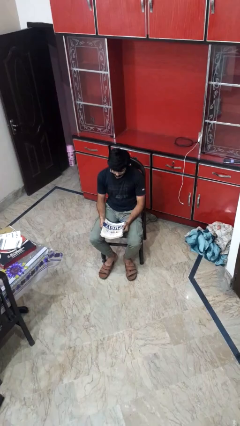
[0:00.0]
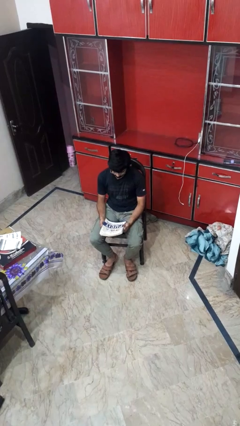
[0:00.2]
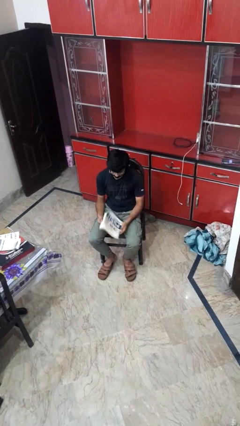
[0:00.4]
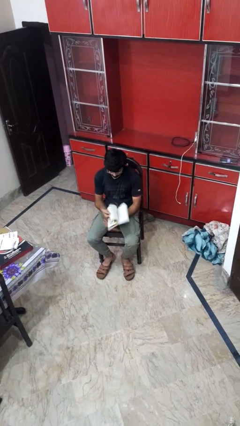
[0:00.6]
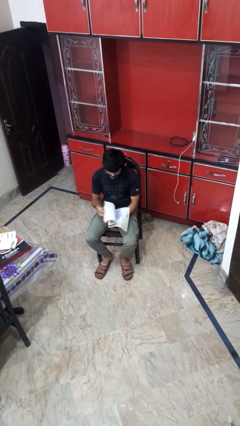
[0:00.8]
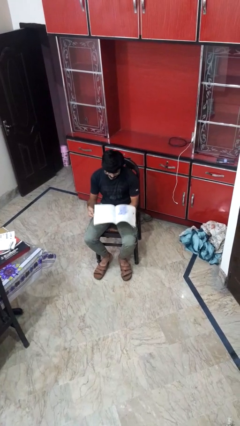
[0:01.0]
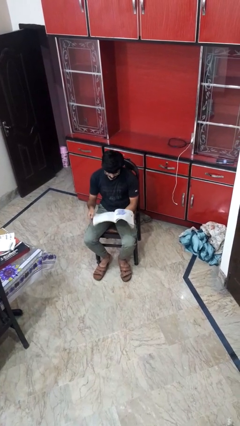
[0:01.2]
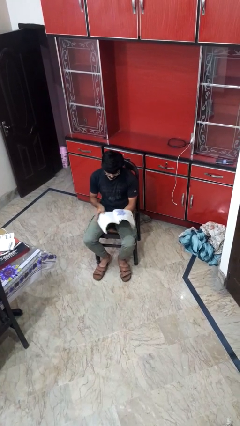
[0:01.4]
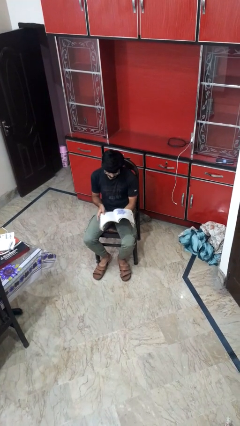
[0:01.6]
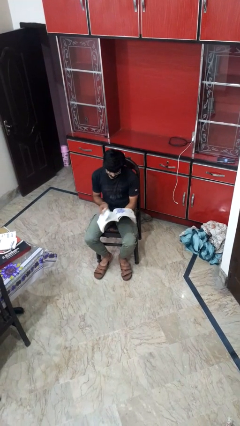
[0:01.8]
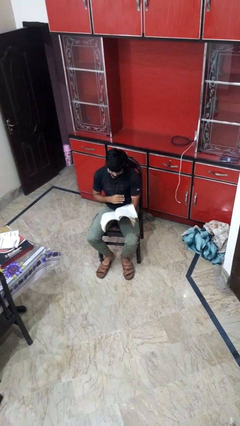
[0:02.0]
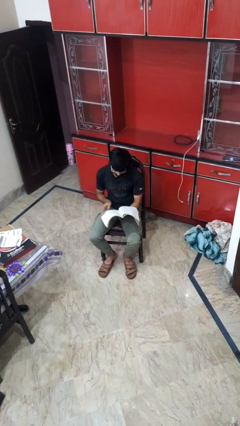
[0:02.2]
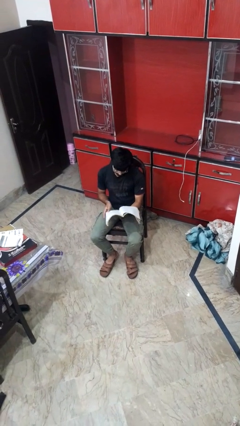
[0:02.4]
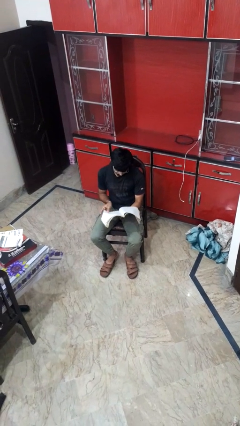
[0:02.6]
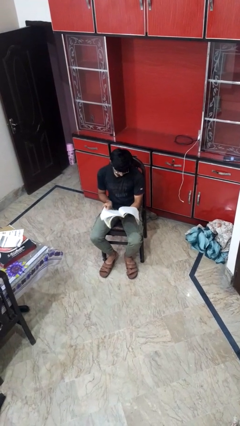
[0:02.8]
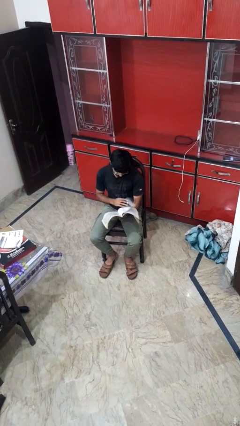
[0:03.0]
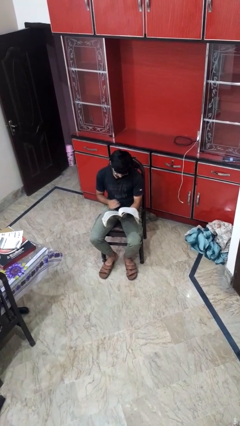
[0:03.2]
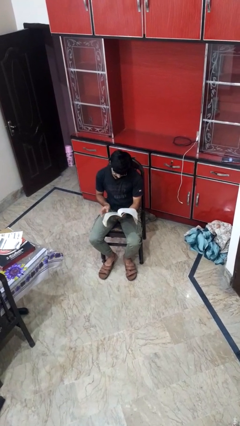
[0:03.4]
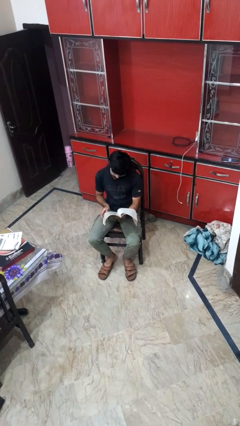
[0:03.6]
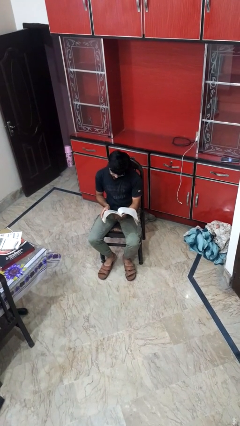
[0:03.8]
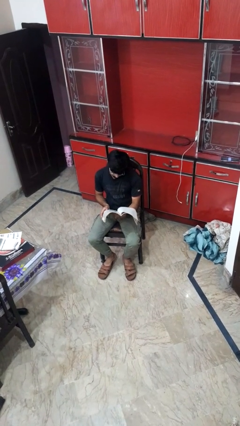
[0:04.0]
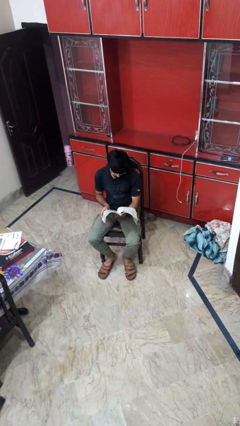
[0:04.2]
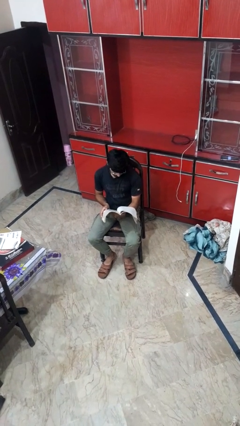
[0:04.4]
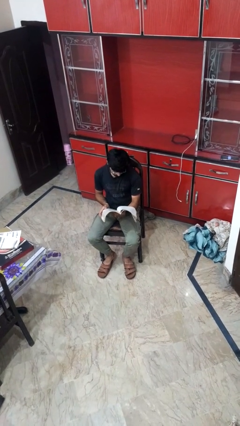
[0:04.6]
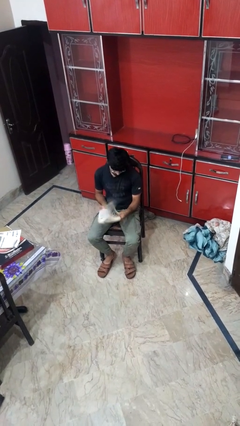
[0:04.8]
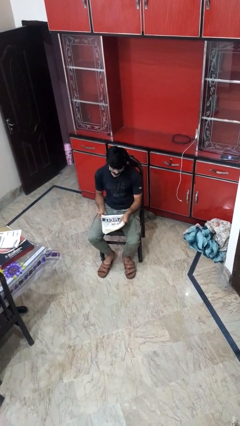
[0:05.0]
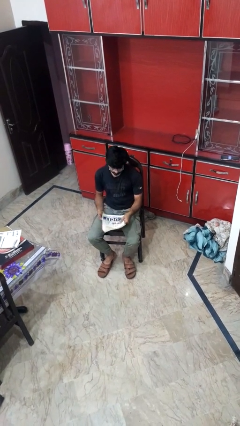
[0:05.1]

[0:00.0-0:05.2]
person reads magazine

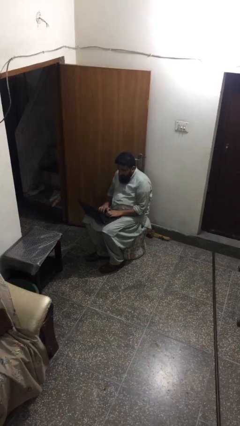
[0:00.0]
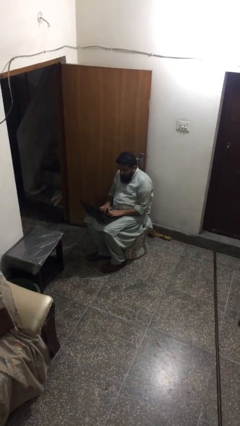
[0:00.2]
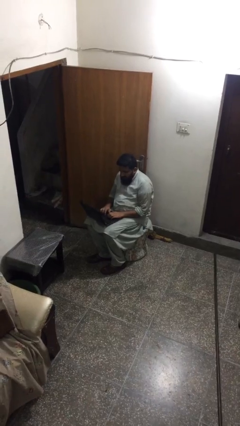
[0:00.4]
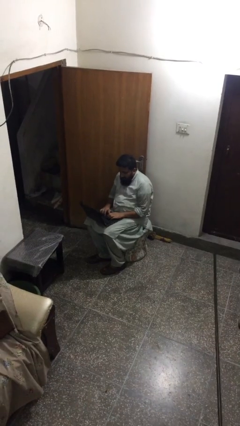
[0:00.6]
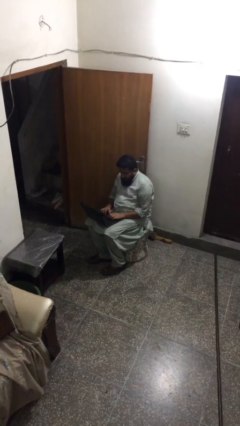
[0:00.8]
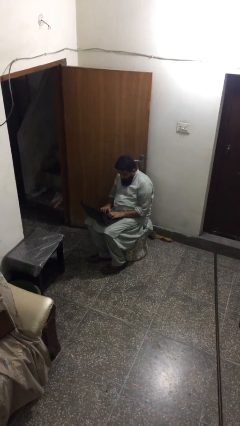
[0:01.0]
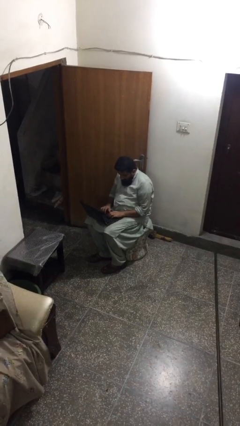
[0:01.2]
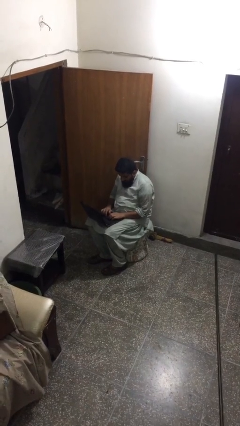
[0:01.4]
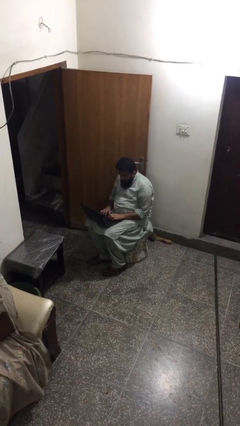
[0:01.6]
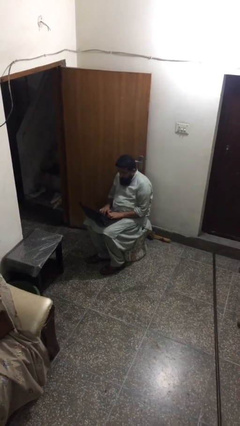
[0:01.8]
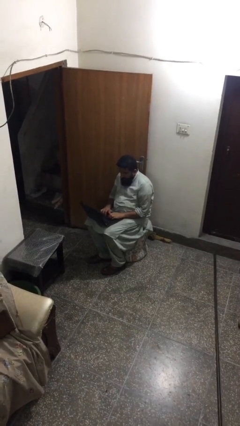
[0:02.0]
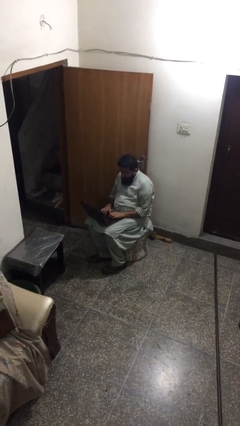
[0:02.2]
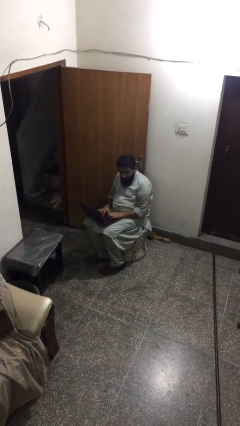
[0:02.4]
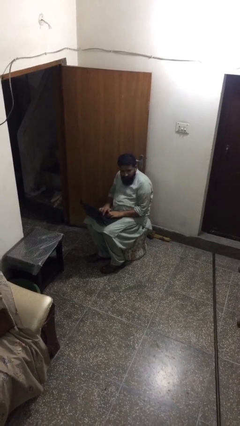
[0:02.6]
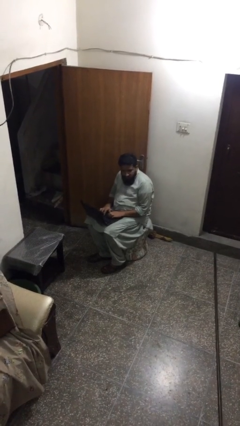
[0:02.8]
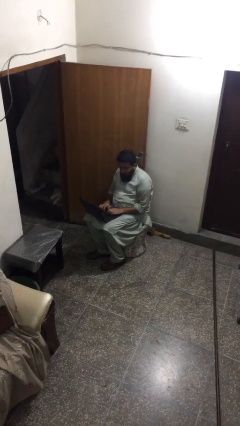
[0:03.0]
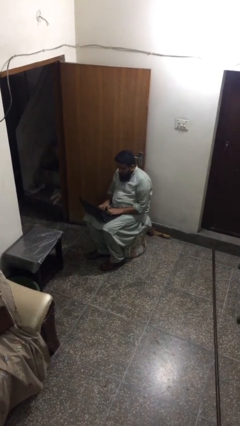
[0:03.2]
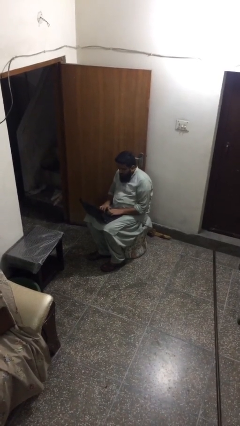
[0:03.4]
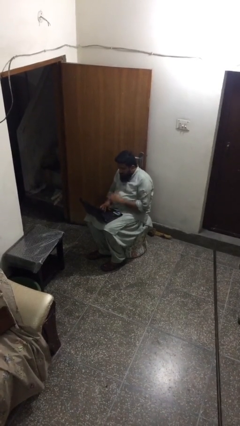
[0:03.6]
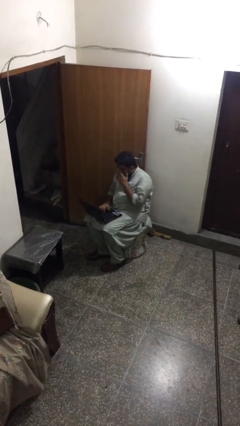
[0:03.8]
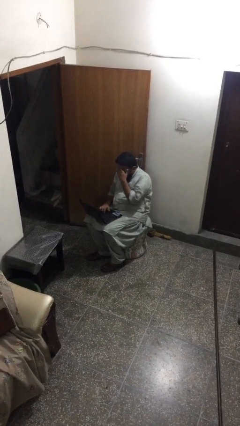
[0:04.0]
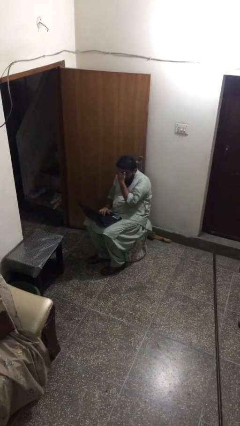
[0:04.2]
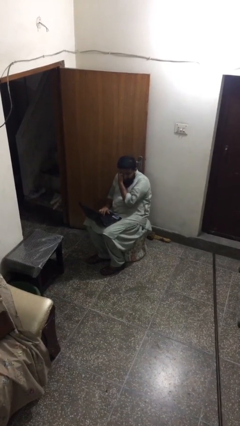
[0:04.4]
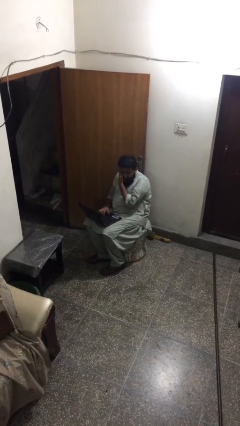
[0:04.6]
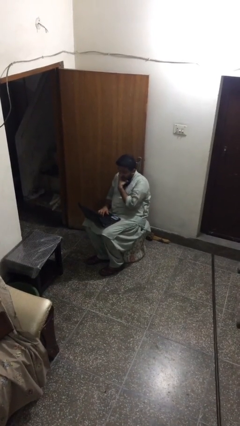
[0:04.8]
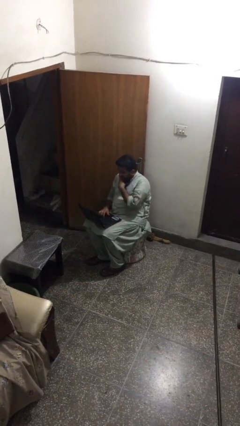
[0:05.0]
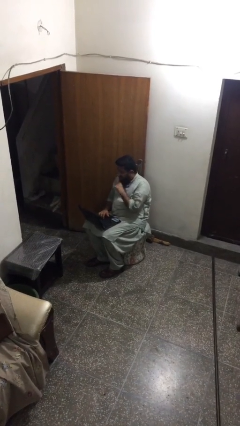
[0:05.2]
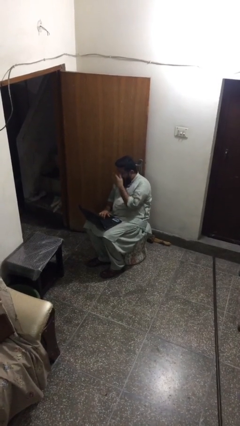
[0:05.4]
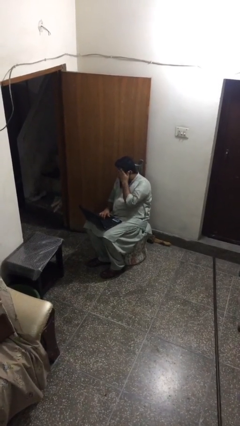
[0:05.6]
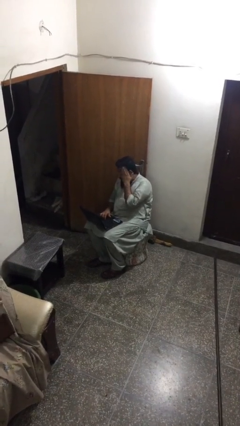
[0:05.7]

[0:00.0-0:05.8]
person interacts with laptop

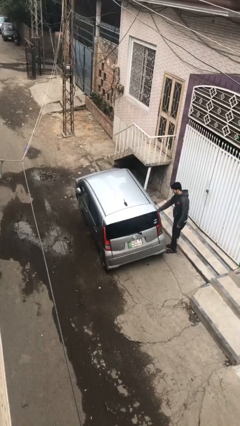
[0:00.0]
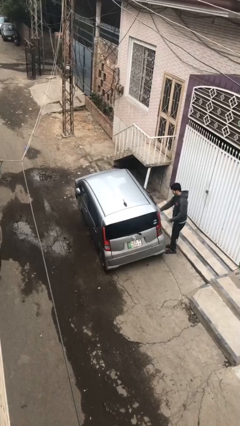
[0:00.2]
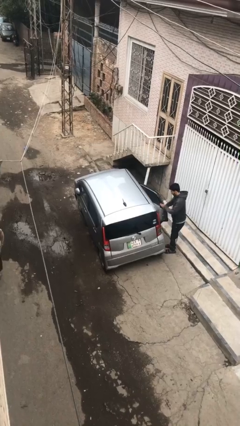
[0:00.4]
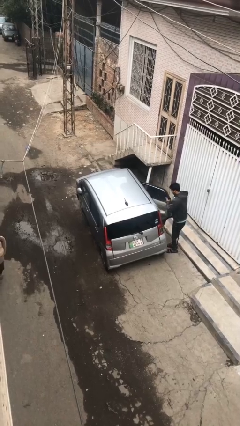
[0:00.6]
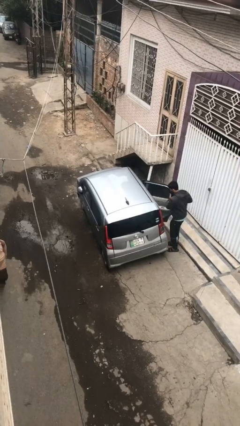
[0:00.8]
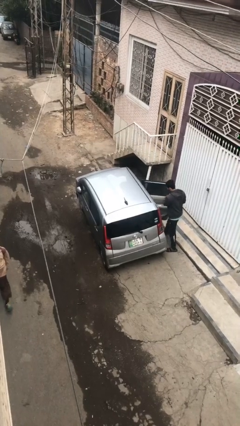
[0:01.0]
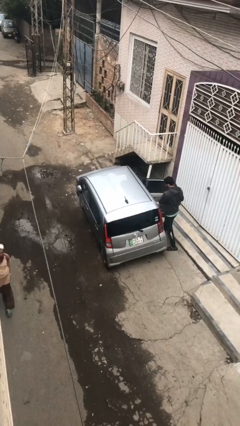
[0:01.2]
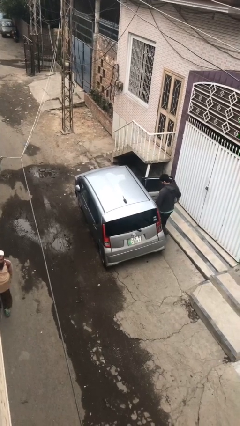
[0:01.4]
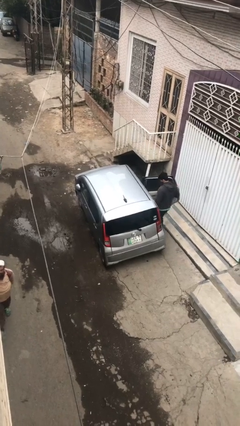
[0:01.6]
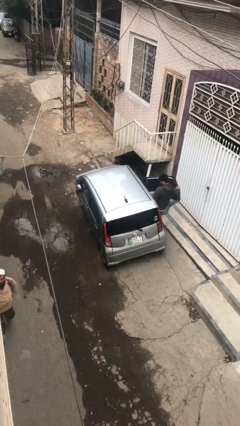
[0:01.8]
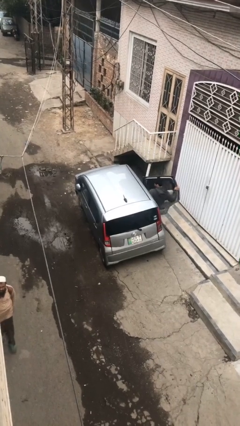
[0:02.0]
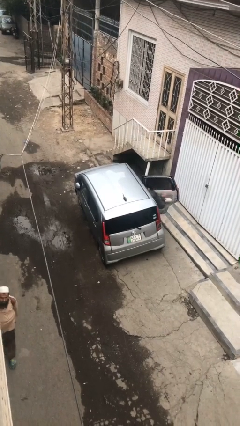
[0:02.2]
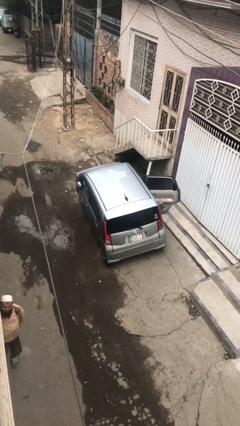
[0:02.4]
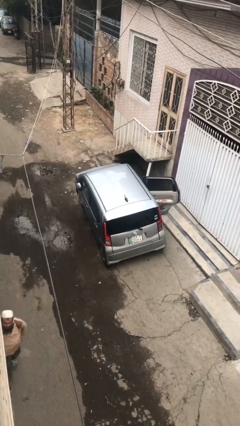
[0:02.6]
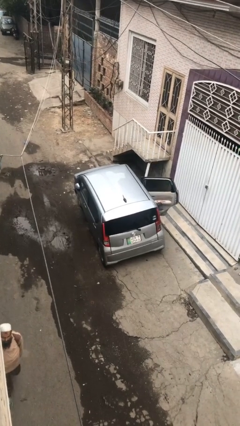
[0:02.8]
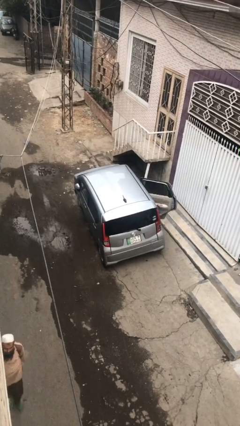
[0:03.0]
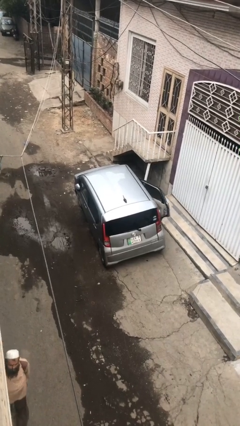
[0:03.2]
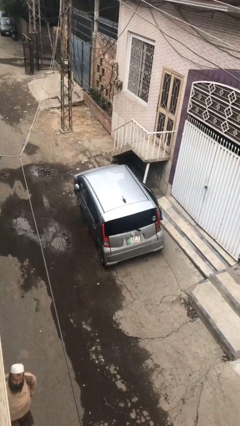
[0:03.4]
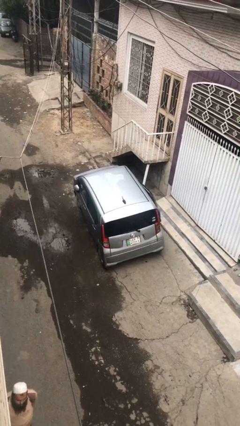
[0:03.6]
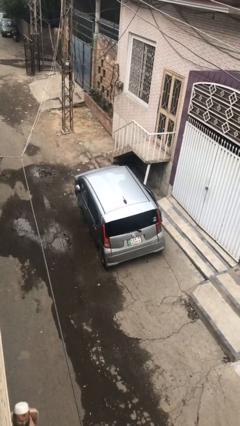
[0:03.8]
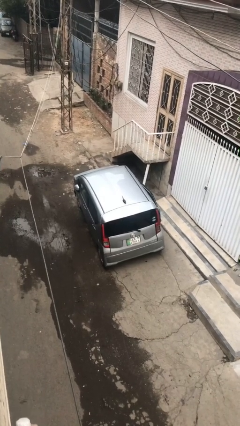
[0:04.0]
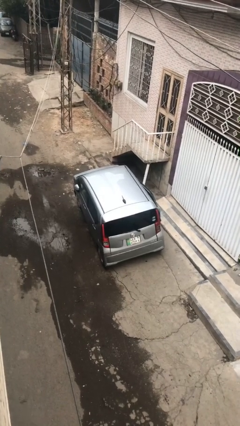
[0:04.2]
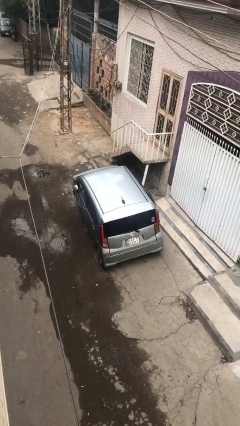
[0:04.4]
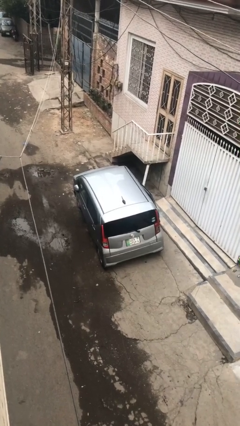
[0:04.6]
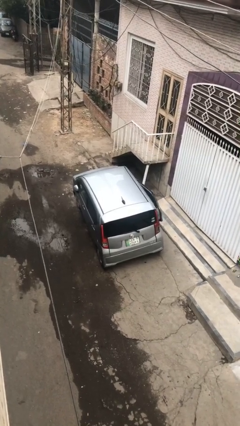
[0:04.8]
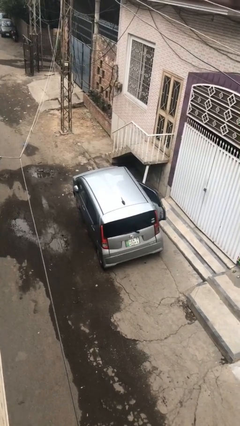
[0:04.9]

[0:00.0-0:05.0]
car picks up person

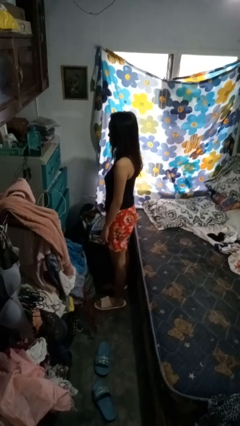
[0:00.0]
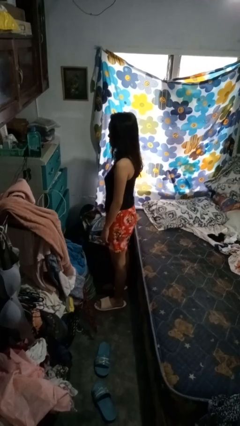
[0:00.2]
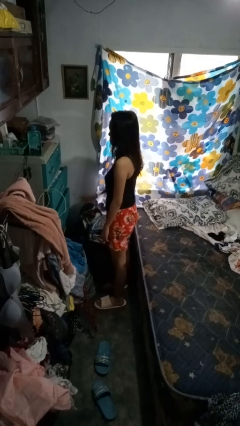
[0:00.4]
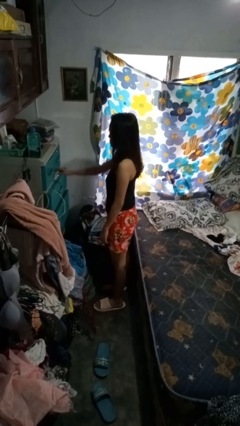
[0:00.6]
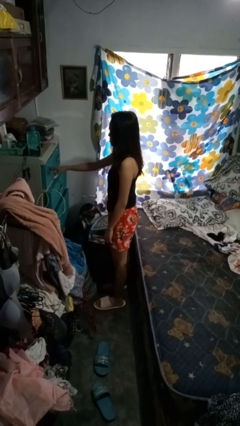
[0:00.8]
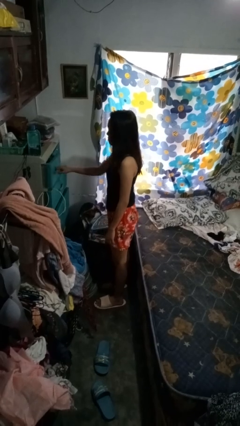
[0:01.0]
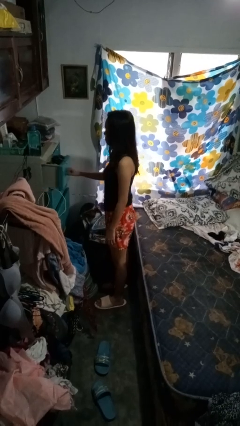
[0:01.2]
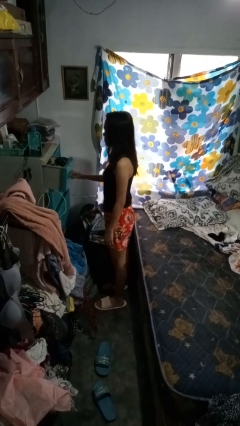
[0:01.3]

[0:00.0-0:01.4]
person opens dresser drawer

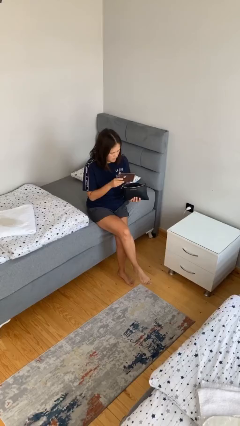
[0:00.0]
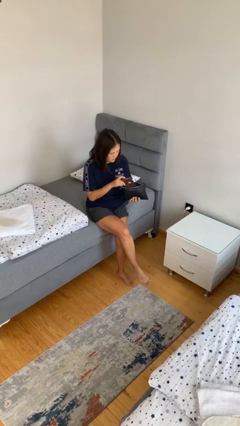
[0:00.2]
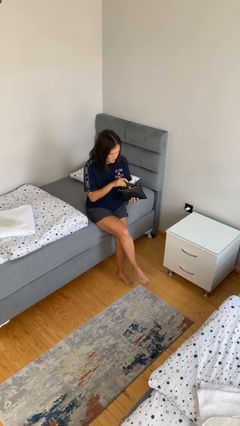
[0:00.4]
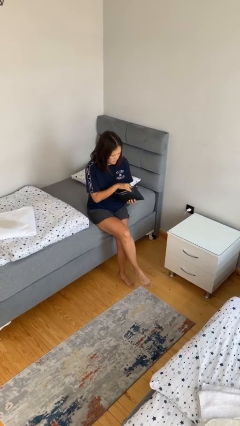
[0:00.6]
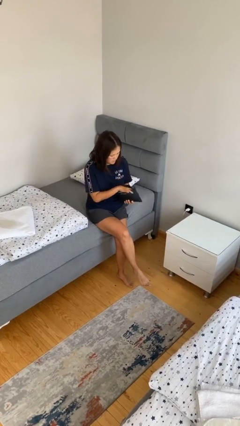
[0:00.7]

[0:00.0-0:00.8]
person puts object into purse
